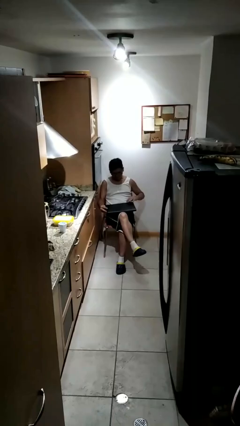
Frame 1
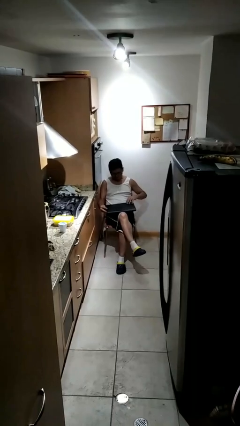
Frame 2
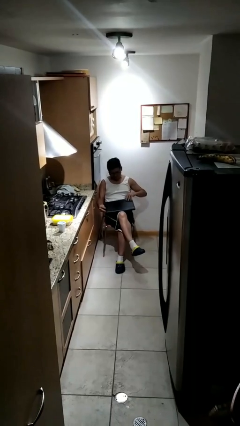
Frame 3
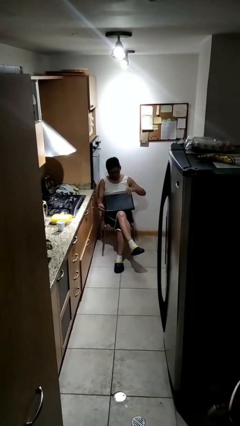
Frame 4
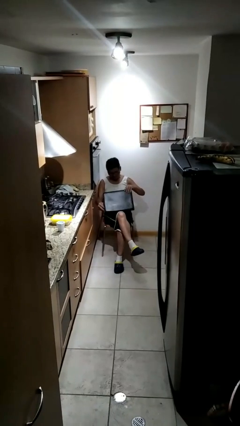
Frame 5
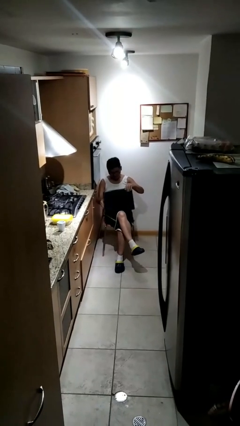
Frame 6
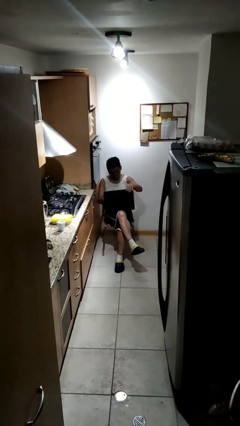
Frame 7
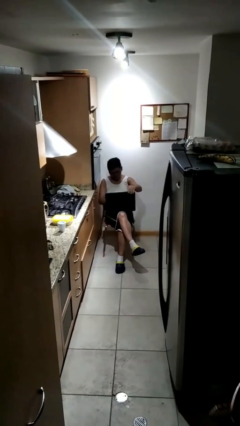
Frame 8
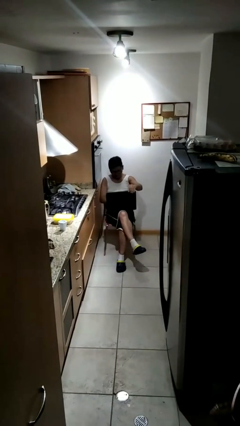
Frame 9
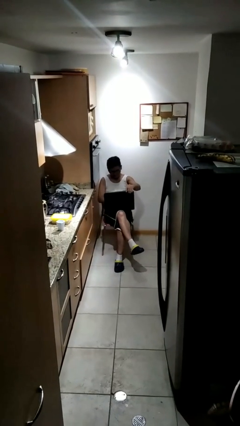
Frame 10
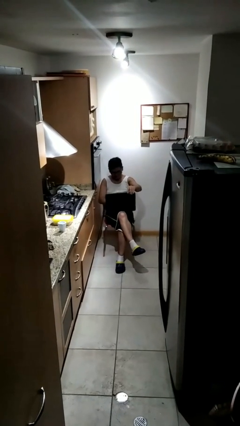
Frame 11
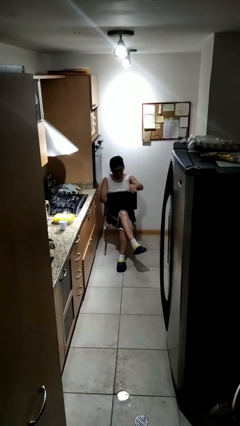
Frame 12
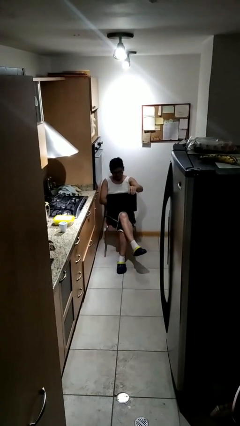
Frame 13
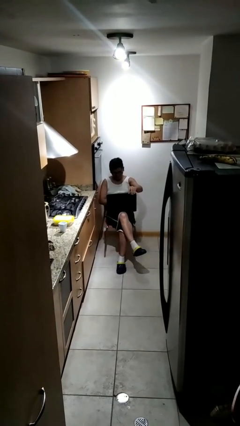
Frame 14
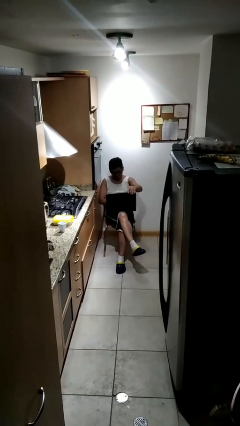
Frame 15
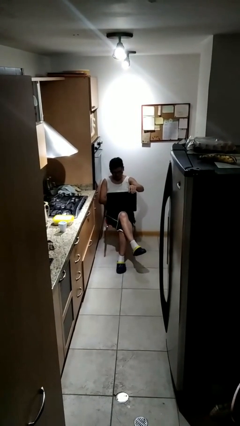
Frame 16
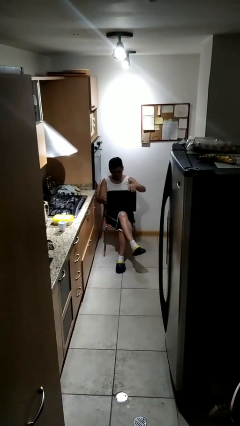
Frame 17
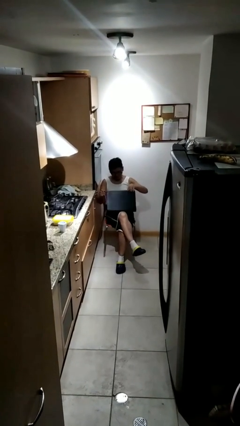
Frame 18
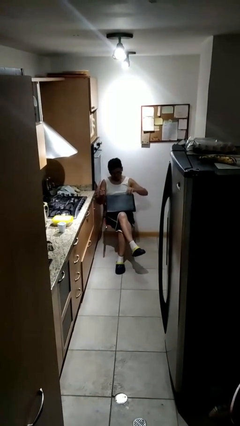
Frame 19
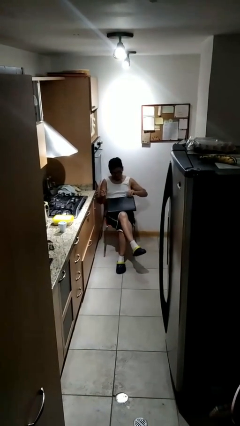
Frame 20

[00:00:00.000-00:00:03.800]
person interacts with laptop

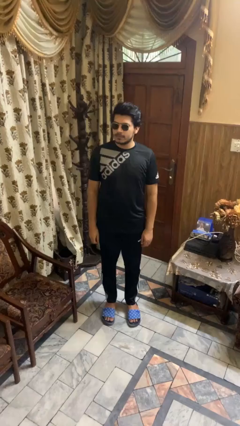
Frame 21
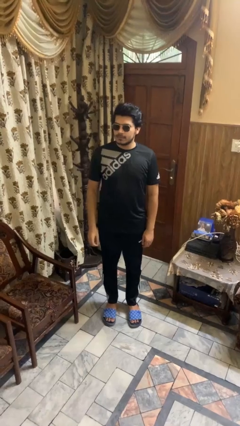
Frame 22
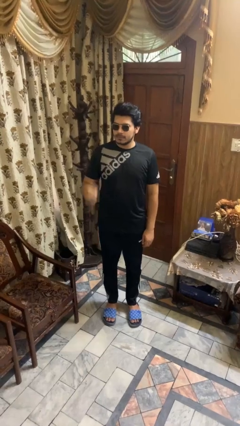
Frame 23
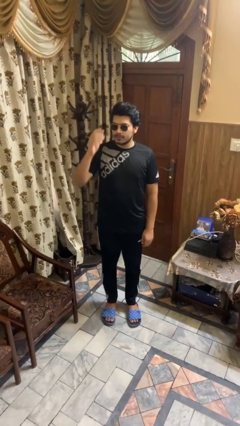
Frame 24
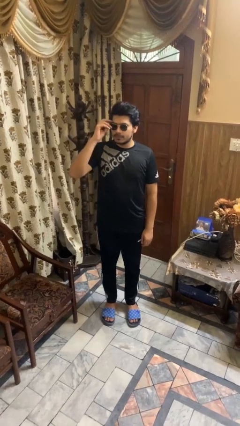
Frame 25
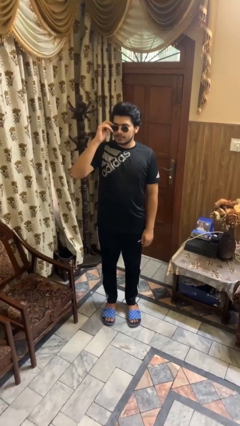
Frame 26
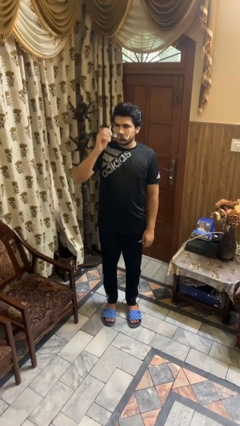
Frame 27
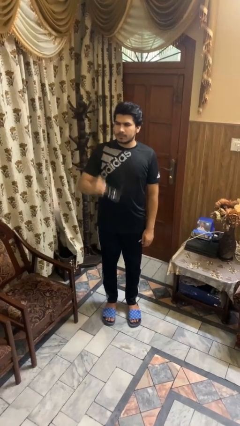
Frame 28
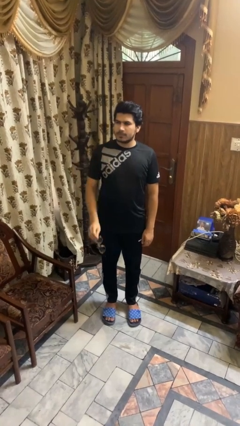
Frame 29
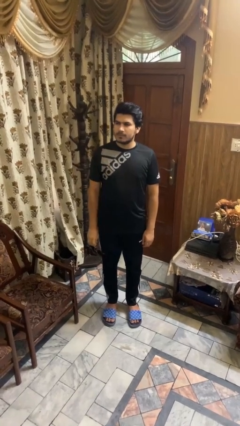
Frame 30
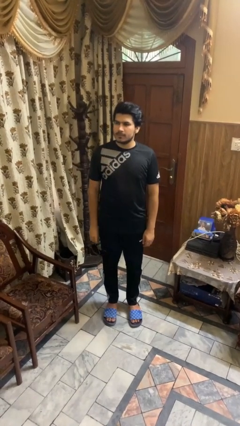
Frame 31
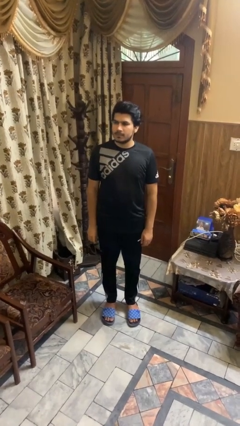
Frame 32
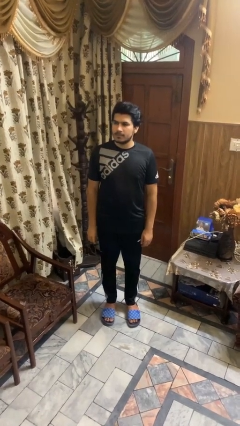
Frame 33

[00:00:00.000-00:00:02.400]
person takes off sunglasses

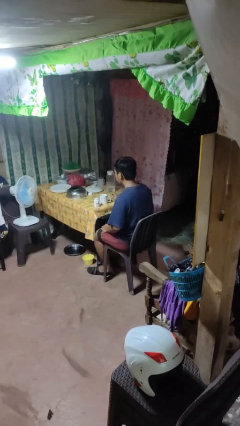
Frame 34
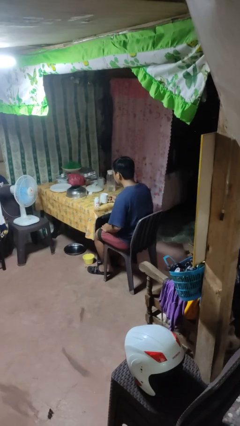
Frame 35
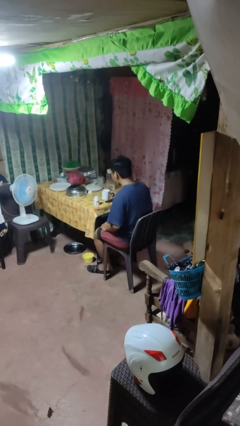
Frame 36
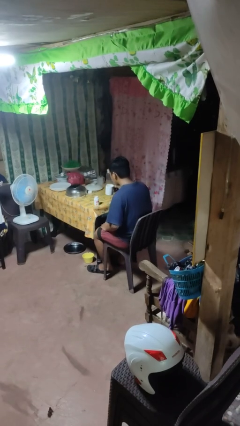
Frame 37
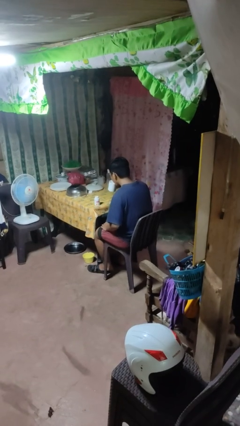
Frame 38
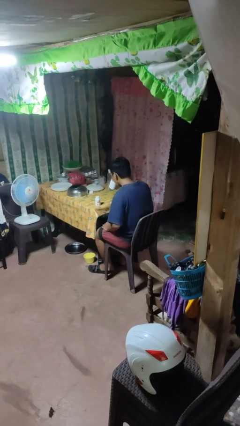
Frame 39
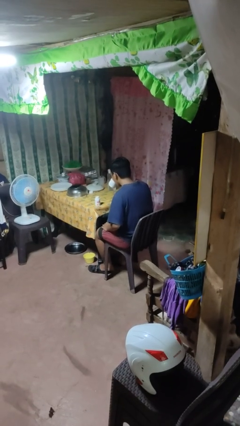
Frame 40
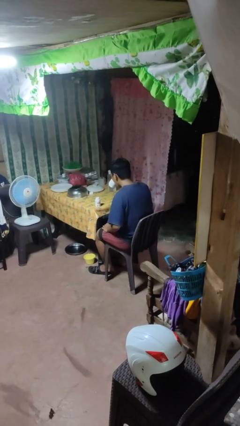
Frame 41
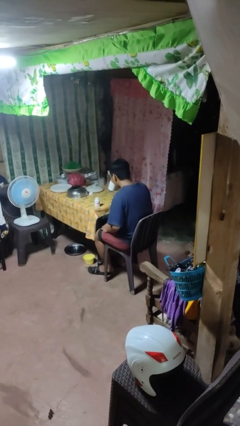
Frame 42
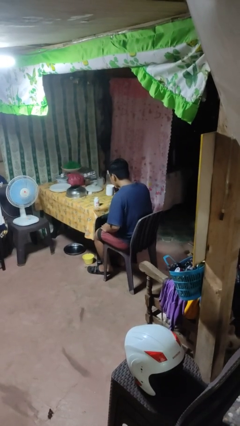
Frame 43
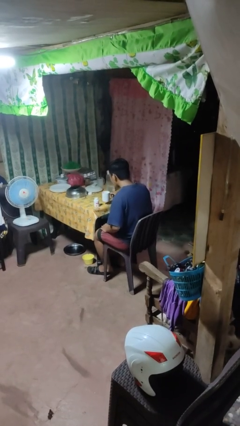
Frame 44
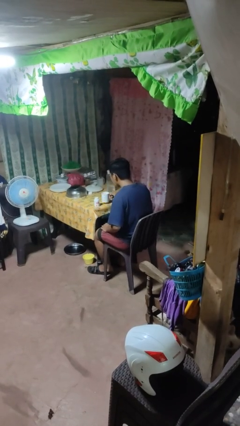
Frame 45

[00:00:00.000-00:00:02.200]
person drinks from cup

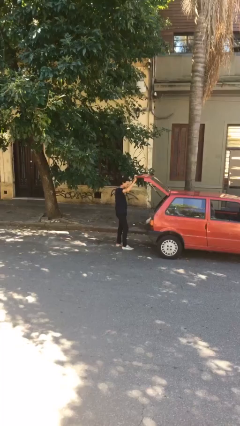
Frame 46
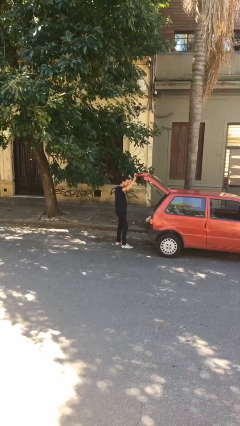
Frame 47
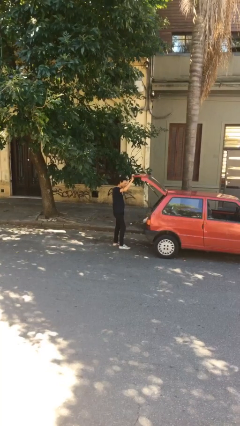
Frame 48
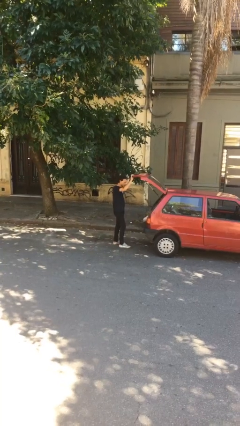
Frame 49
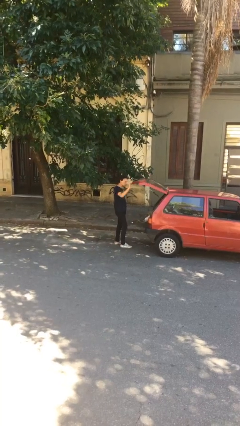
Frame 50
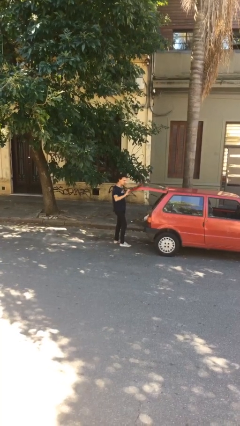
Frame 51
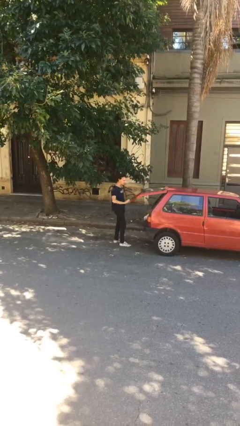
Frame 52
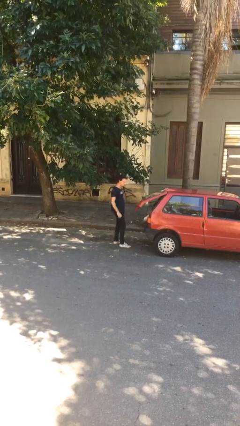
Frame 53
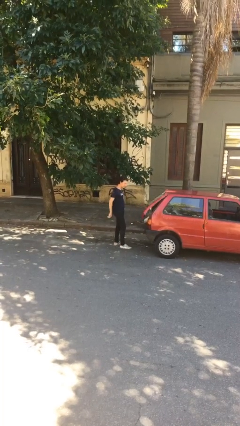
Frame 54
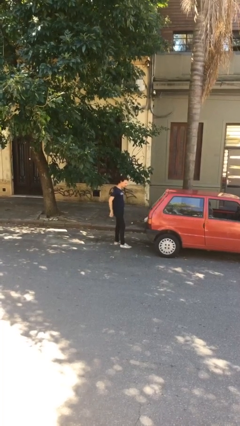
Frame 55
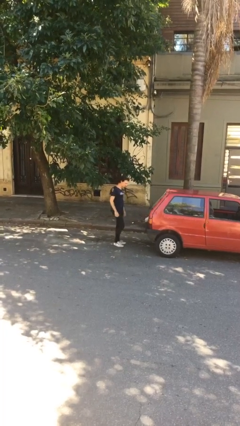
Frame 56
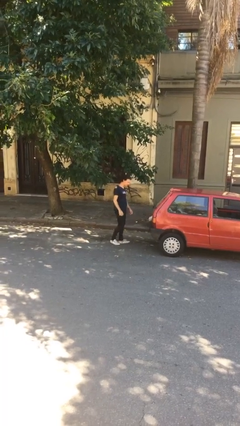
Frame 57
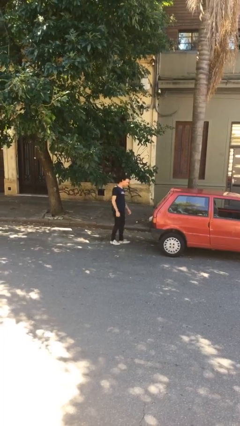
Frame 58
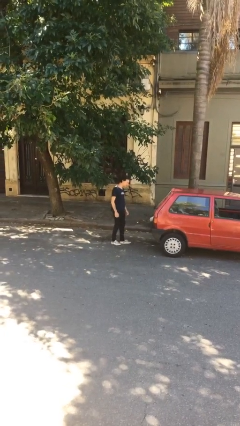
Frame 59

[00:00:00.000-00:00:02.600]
person closes car trunk

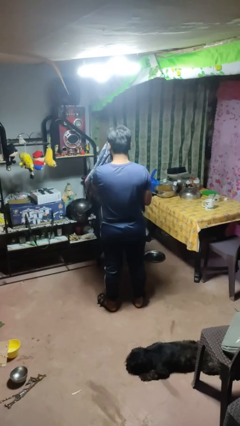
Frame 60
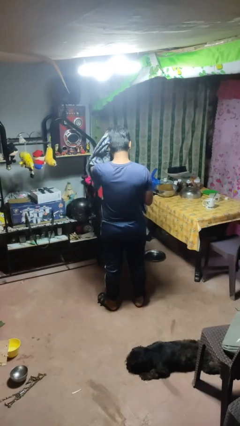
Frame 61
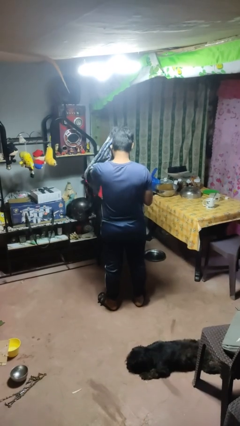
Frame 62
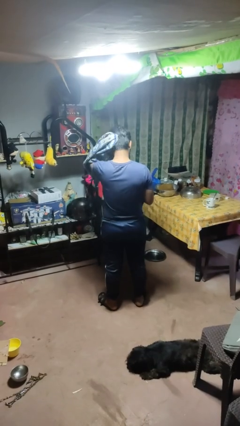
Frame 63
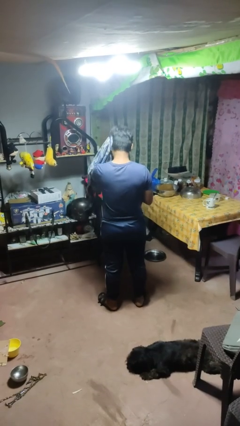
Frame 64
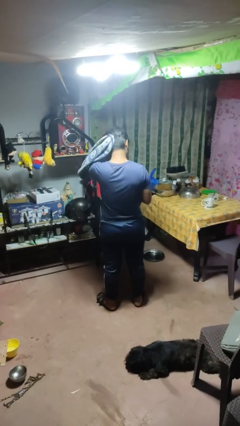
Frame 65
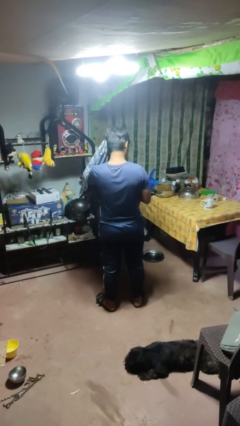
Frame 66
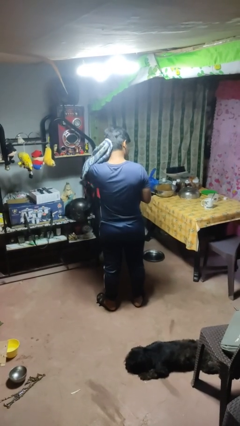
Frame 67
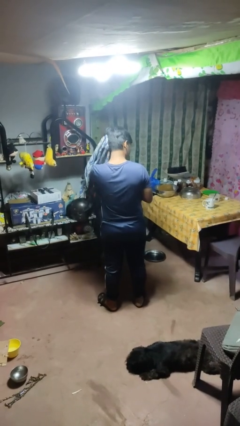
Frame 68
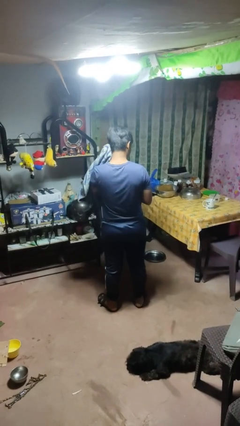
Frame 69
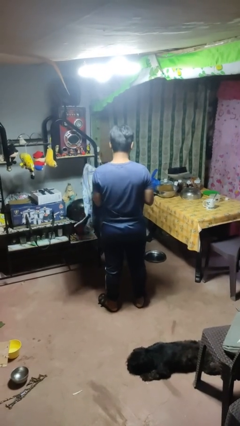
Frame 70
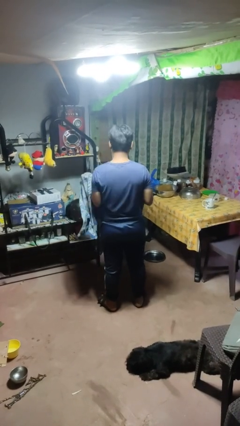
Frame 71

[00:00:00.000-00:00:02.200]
person dries hair with towel

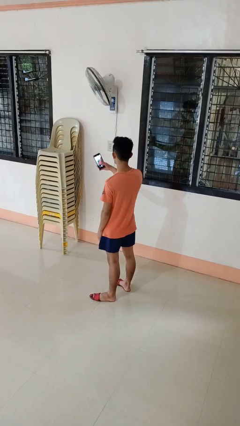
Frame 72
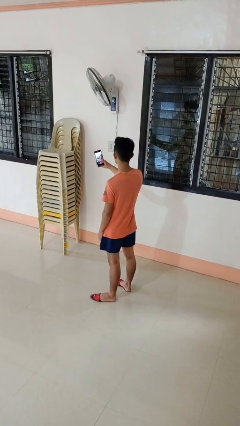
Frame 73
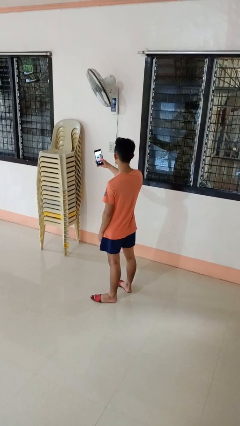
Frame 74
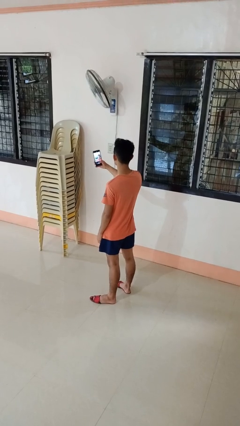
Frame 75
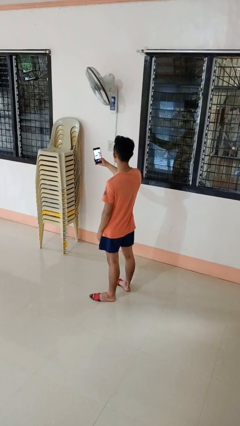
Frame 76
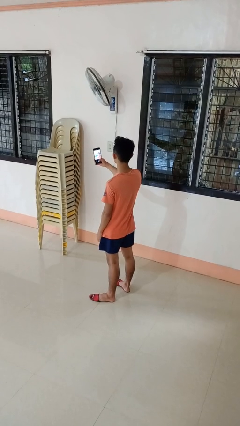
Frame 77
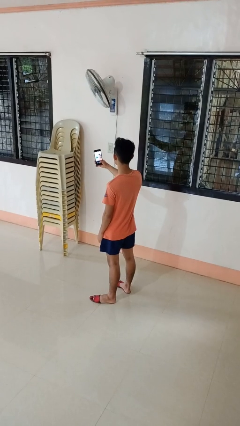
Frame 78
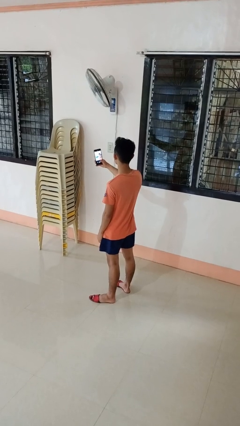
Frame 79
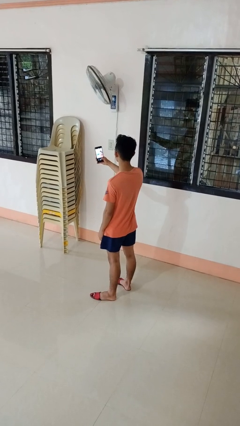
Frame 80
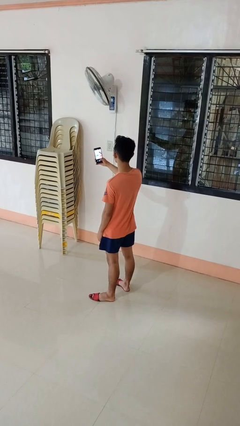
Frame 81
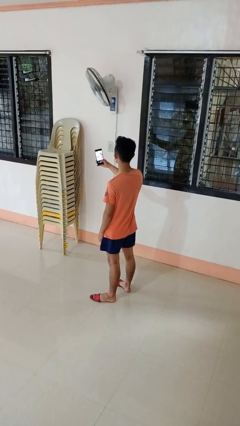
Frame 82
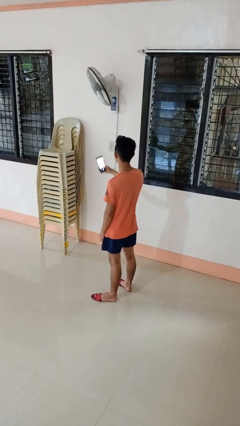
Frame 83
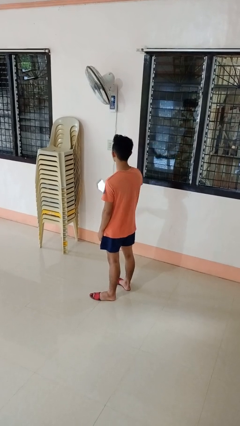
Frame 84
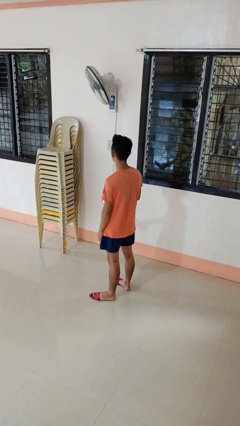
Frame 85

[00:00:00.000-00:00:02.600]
person takes selfie

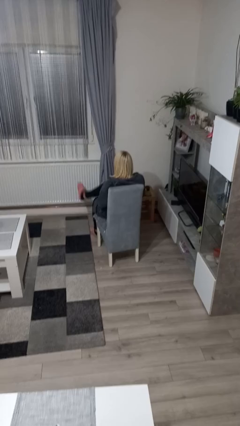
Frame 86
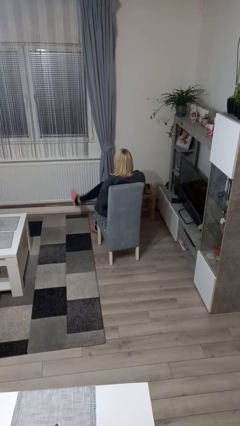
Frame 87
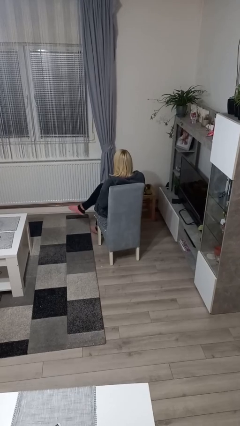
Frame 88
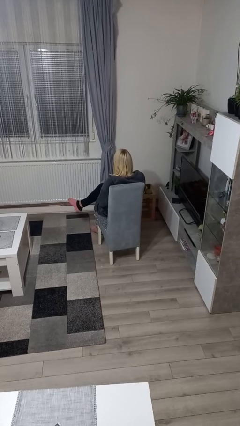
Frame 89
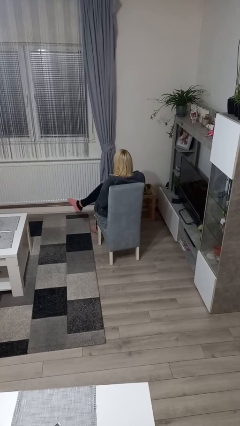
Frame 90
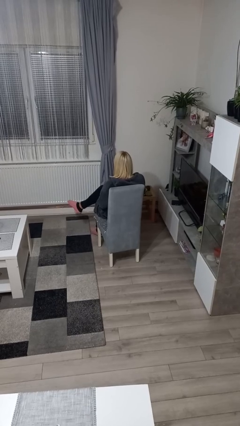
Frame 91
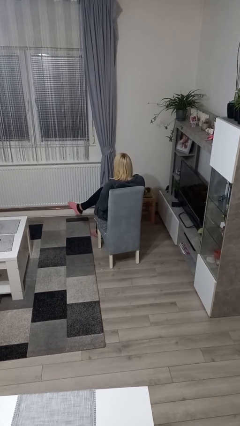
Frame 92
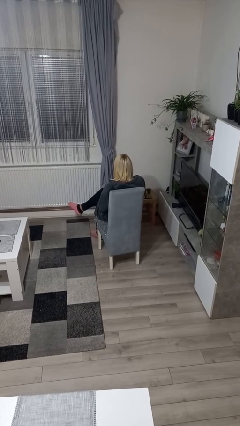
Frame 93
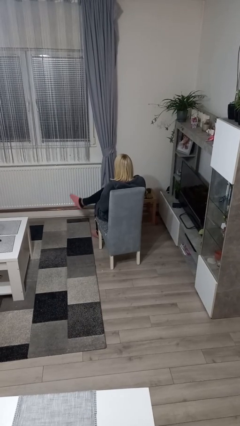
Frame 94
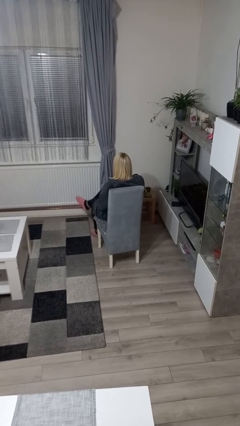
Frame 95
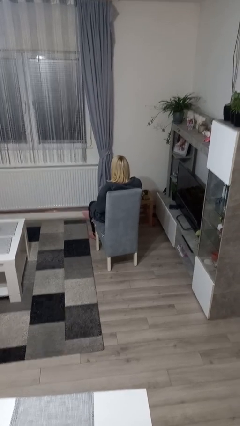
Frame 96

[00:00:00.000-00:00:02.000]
person crosses legs
